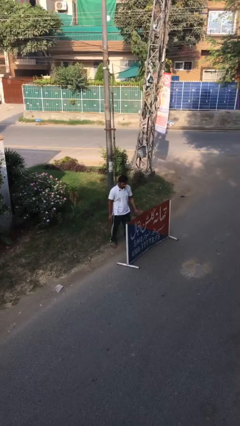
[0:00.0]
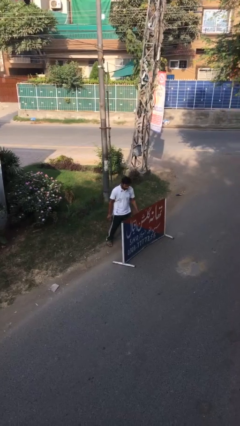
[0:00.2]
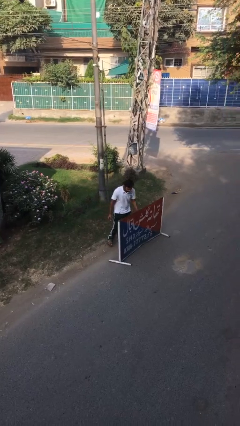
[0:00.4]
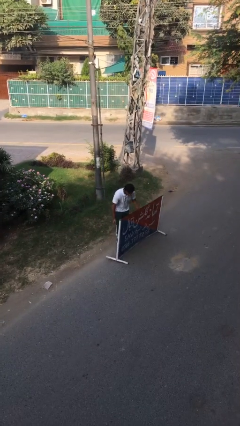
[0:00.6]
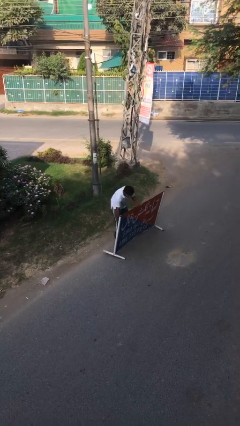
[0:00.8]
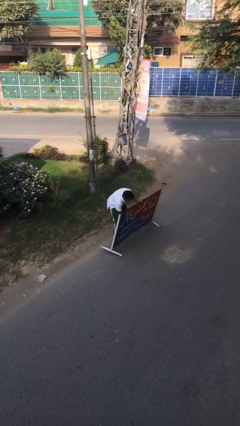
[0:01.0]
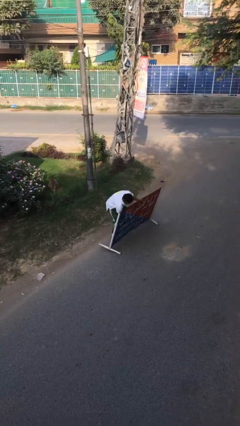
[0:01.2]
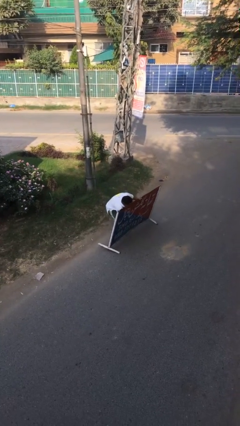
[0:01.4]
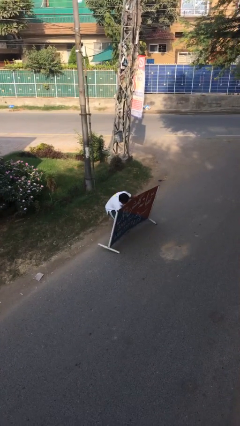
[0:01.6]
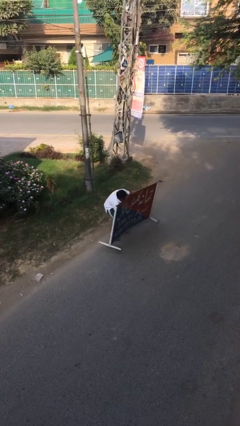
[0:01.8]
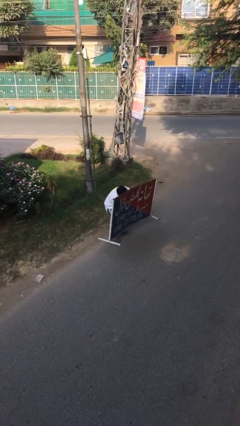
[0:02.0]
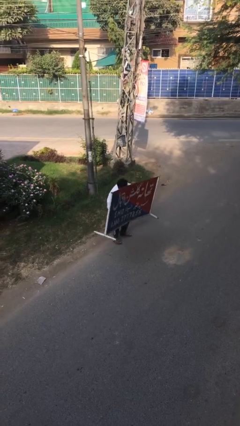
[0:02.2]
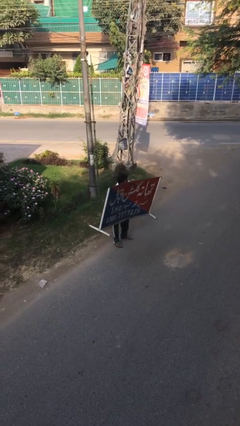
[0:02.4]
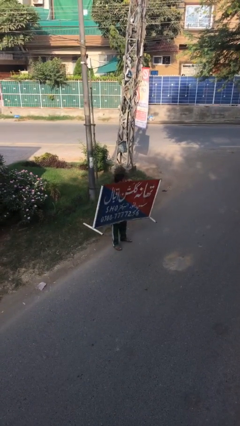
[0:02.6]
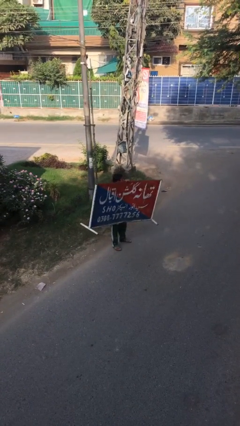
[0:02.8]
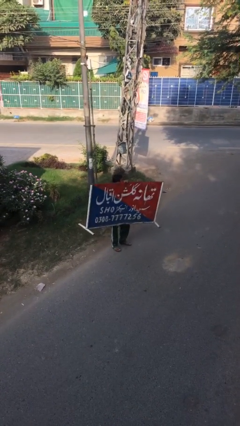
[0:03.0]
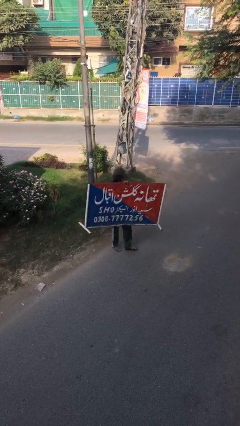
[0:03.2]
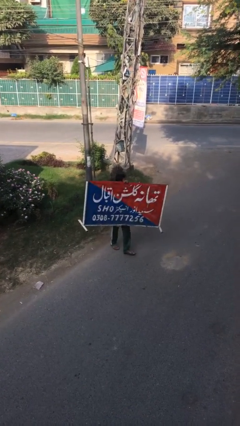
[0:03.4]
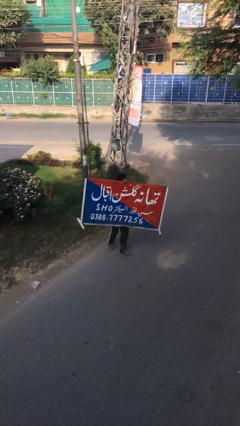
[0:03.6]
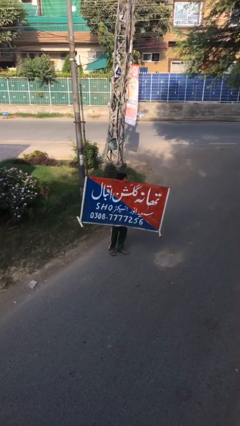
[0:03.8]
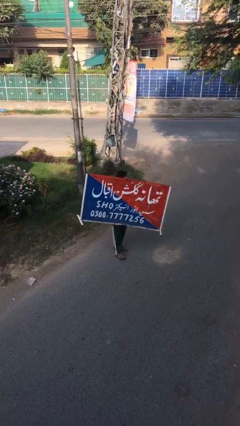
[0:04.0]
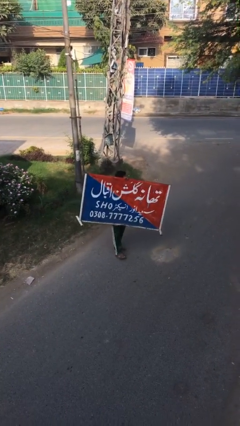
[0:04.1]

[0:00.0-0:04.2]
person picks up object from floor

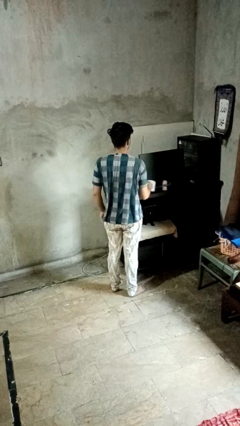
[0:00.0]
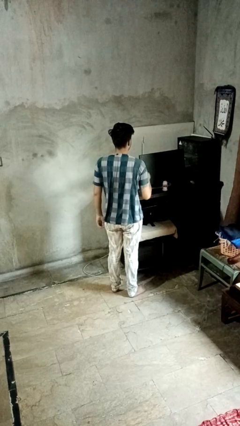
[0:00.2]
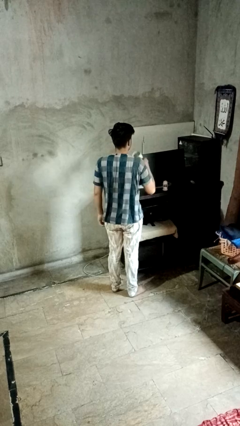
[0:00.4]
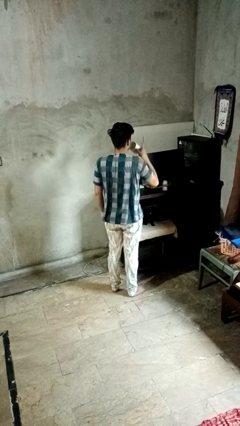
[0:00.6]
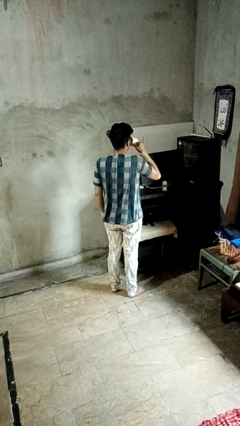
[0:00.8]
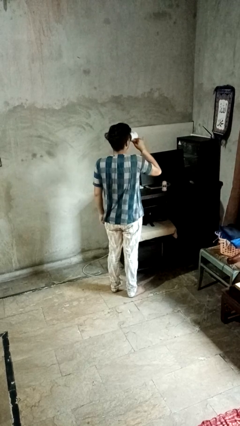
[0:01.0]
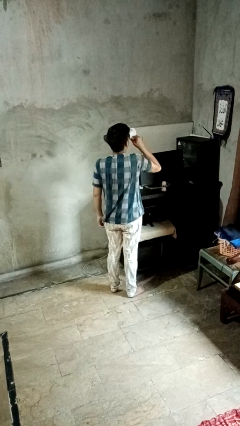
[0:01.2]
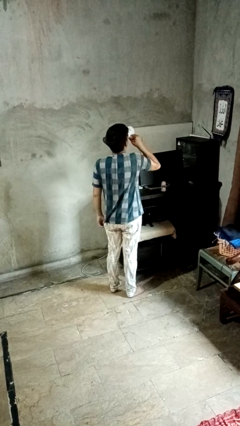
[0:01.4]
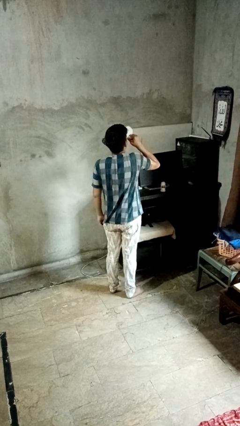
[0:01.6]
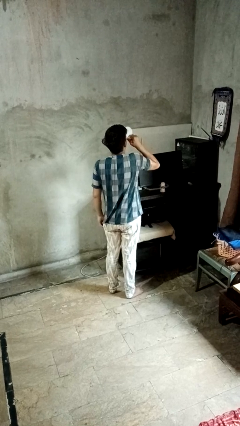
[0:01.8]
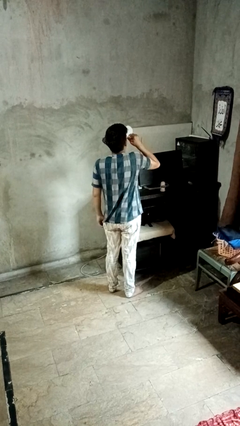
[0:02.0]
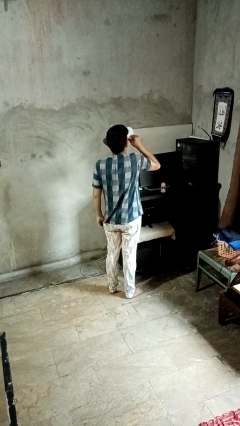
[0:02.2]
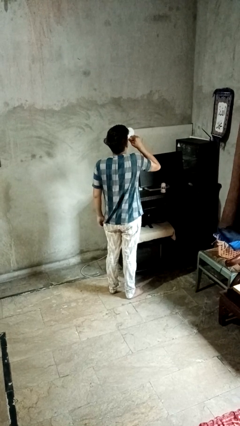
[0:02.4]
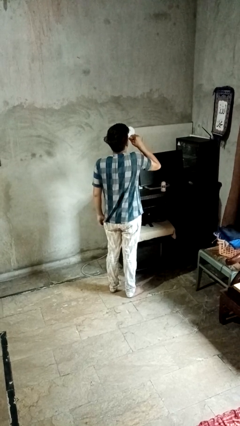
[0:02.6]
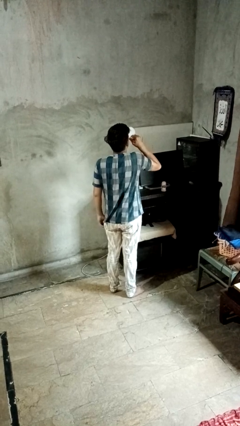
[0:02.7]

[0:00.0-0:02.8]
person drinks from cup

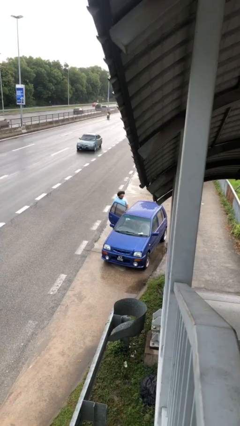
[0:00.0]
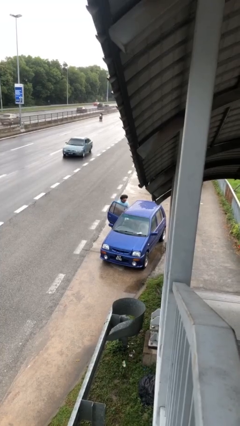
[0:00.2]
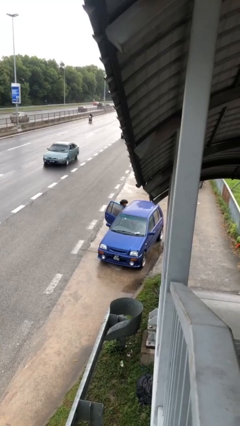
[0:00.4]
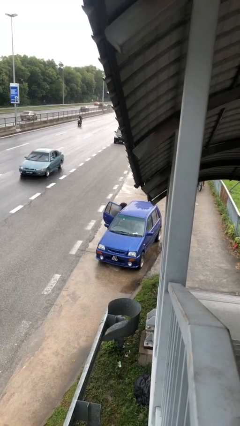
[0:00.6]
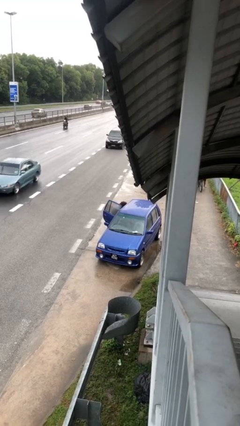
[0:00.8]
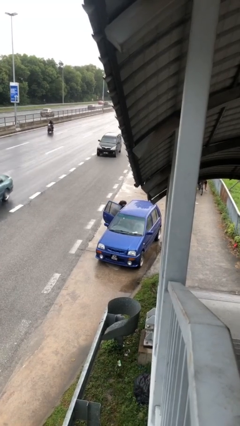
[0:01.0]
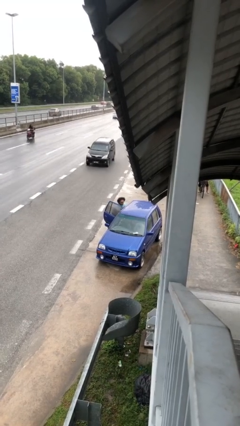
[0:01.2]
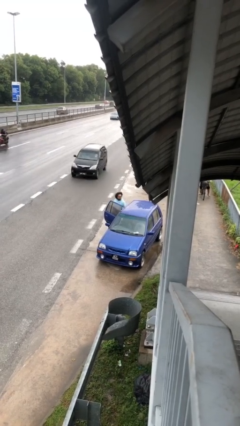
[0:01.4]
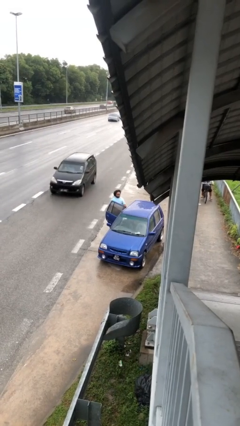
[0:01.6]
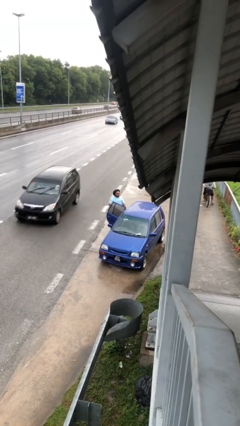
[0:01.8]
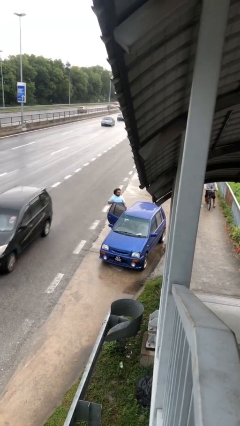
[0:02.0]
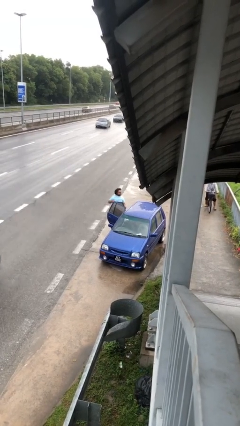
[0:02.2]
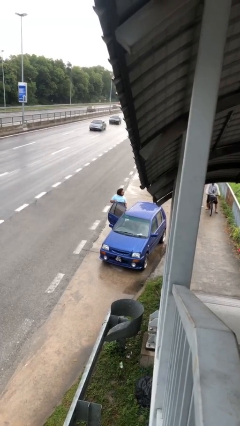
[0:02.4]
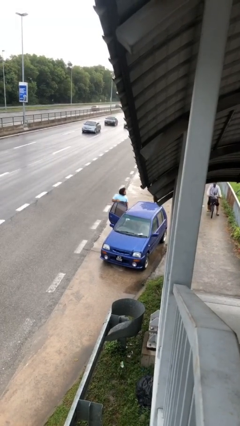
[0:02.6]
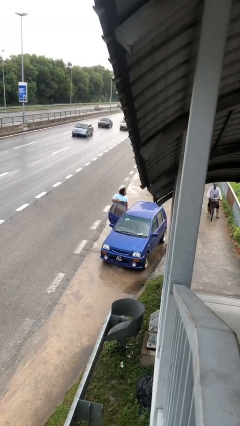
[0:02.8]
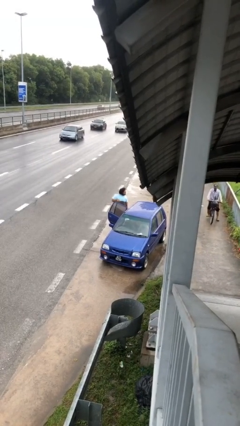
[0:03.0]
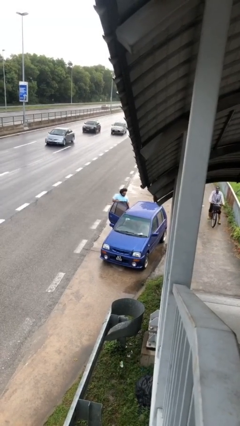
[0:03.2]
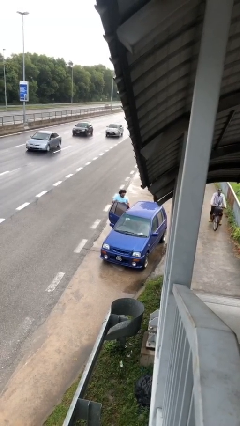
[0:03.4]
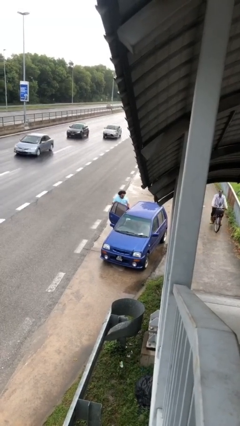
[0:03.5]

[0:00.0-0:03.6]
person unloads car

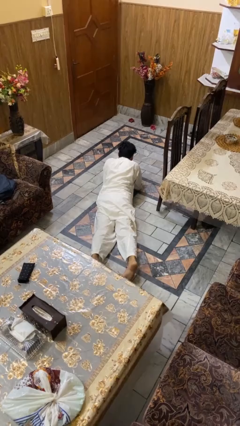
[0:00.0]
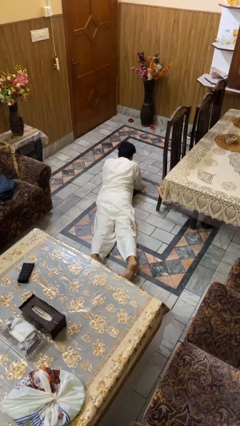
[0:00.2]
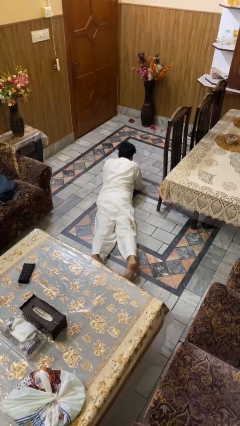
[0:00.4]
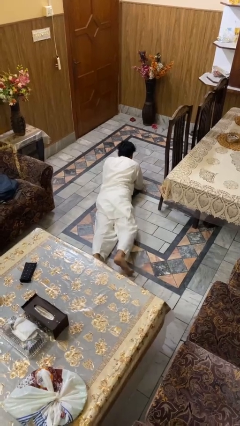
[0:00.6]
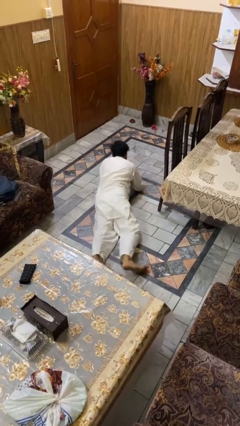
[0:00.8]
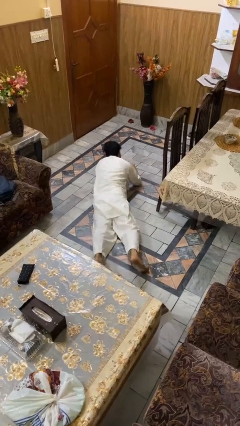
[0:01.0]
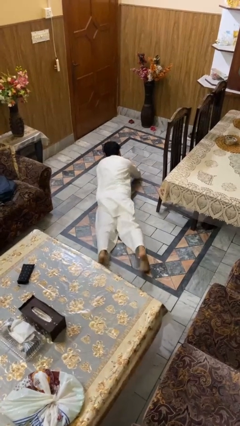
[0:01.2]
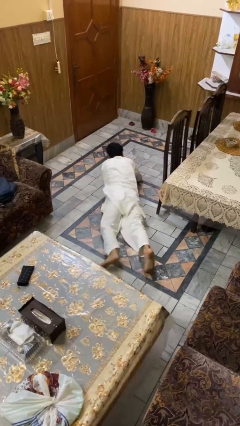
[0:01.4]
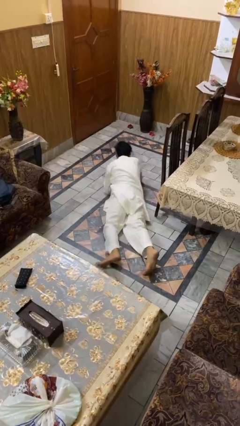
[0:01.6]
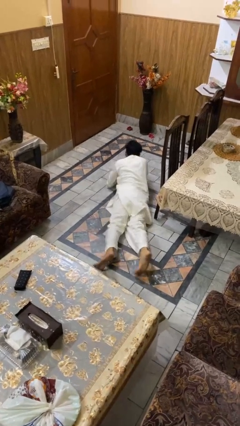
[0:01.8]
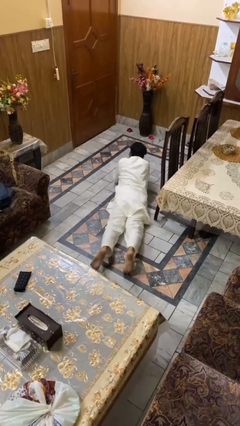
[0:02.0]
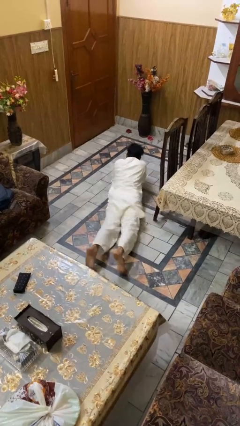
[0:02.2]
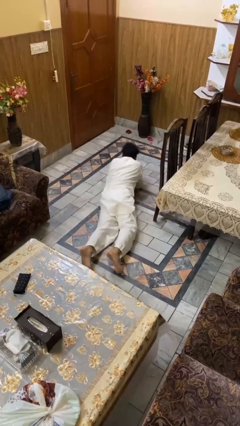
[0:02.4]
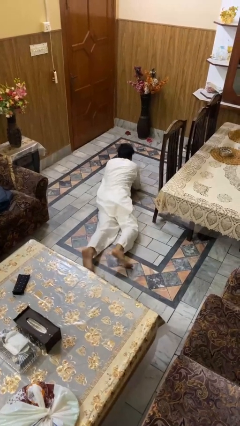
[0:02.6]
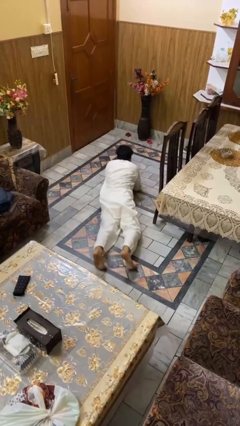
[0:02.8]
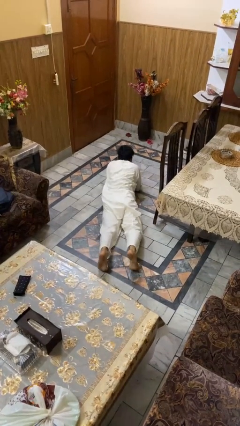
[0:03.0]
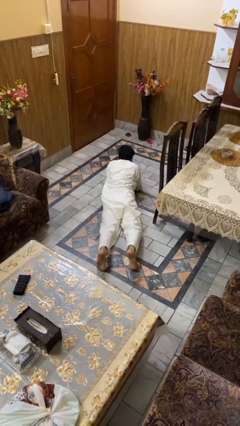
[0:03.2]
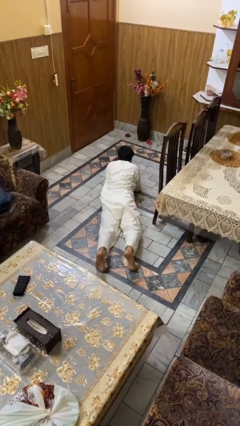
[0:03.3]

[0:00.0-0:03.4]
person crawls

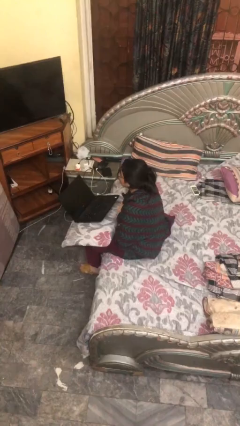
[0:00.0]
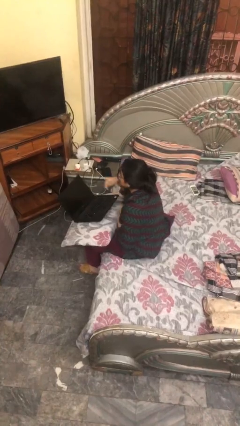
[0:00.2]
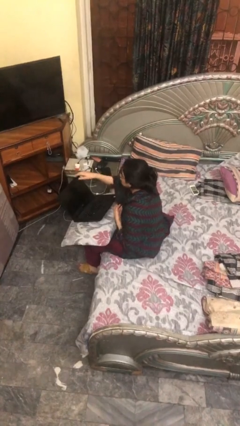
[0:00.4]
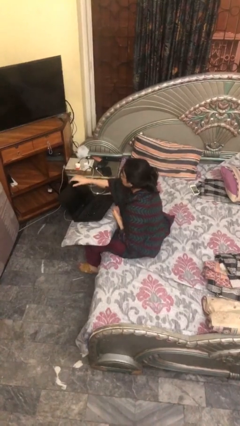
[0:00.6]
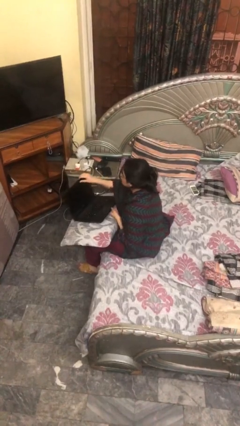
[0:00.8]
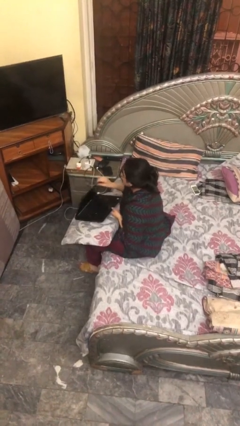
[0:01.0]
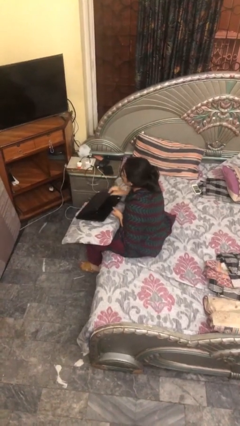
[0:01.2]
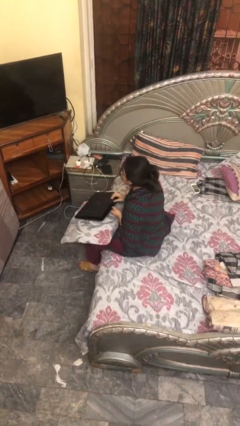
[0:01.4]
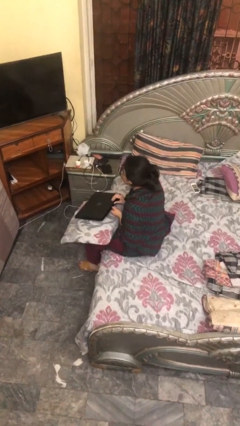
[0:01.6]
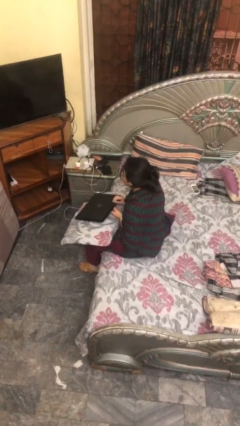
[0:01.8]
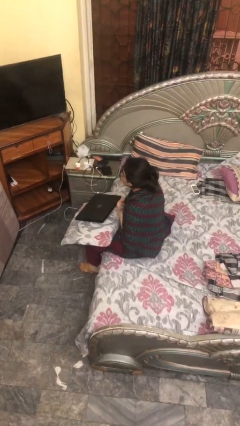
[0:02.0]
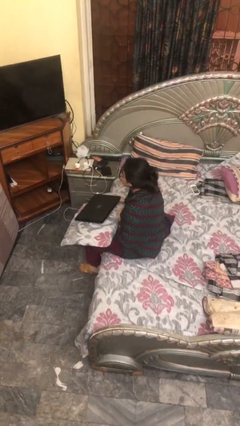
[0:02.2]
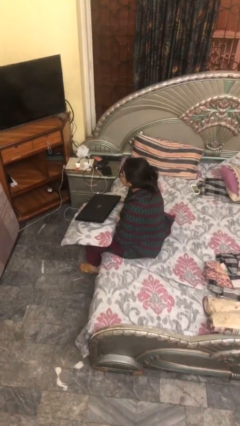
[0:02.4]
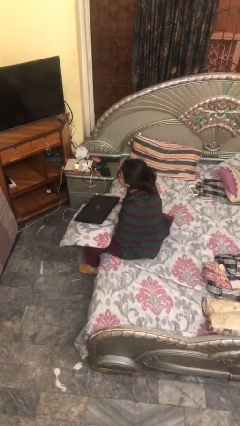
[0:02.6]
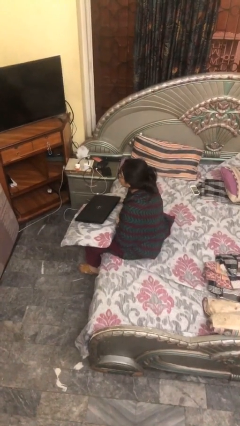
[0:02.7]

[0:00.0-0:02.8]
person closes laptop

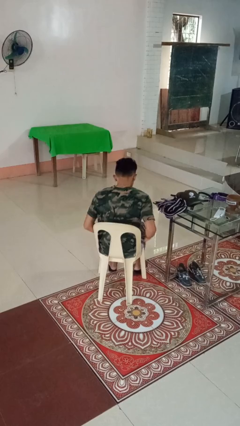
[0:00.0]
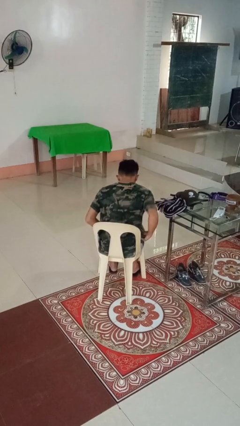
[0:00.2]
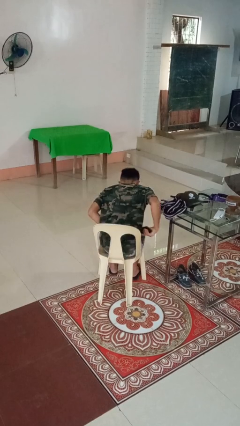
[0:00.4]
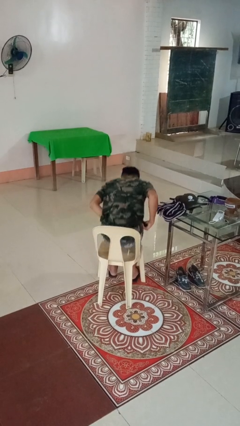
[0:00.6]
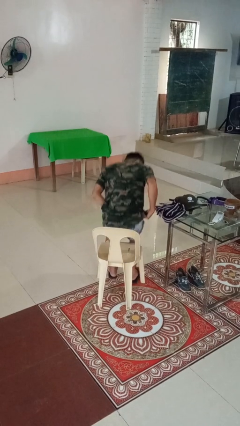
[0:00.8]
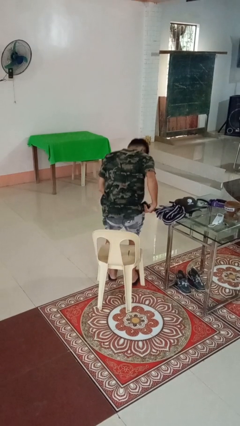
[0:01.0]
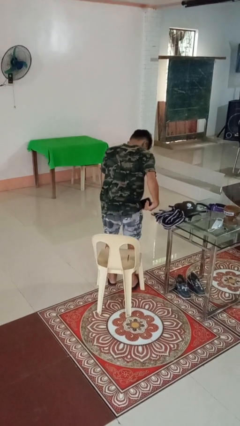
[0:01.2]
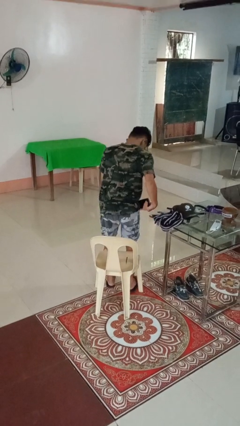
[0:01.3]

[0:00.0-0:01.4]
person puts phone into pocket
